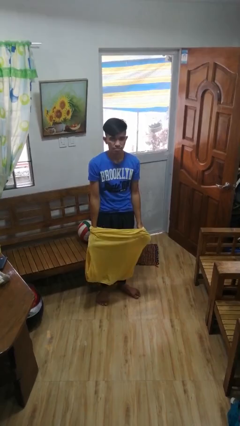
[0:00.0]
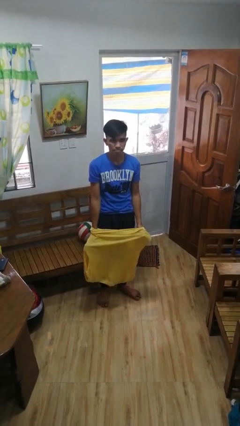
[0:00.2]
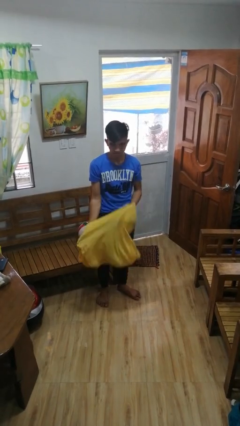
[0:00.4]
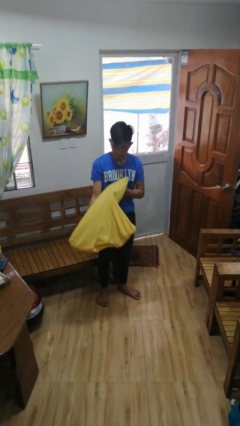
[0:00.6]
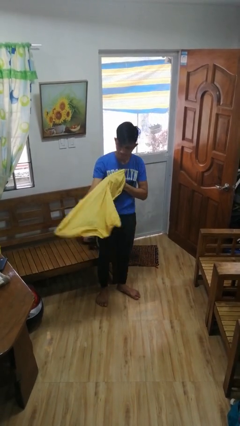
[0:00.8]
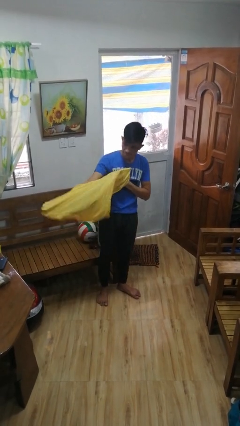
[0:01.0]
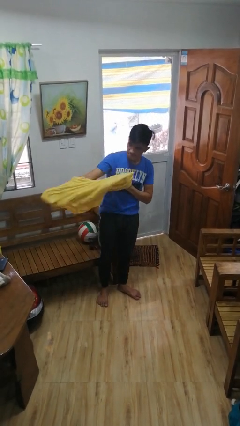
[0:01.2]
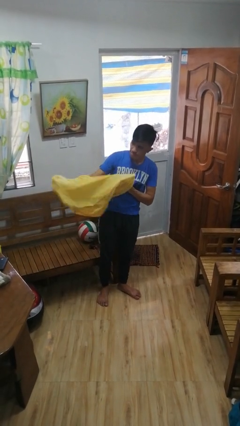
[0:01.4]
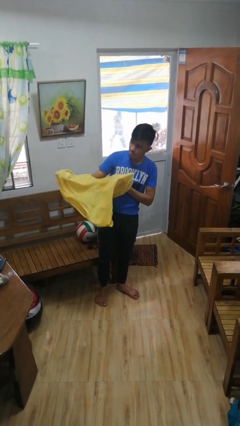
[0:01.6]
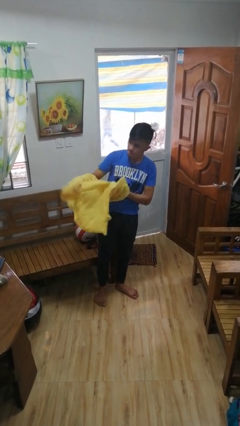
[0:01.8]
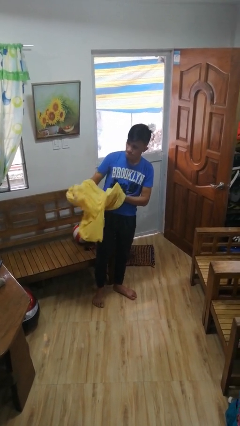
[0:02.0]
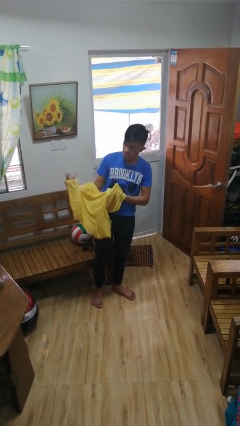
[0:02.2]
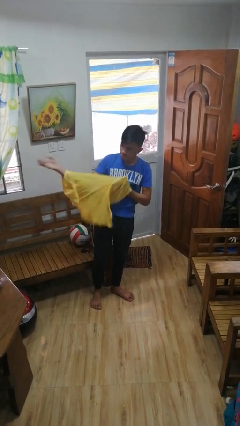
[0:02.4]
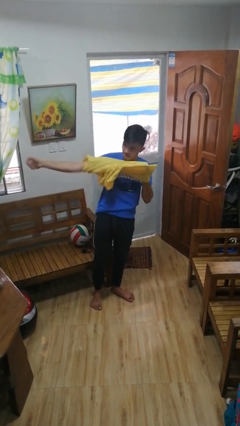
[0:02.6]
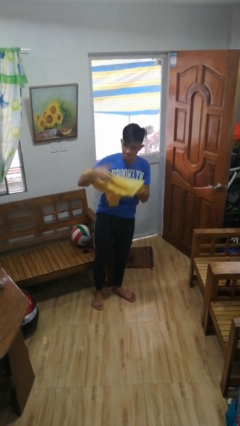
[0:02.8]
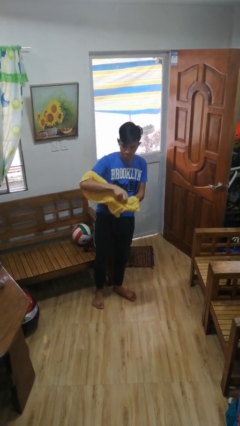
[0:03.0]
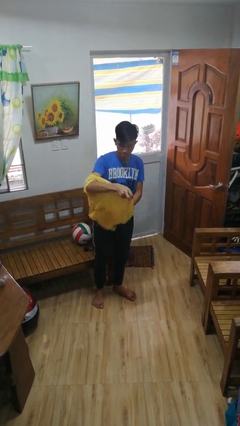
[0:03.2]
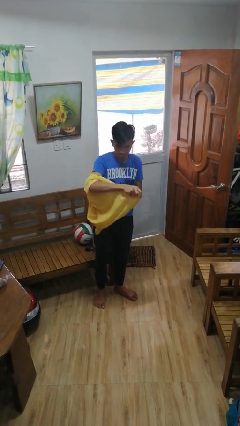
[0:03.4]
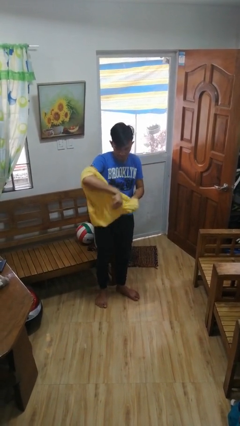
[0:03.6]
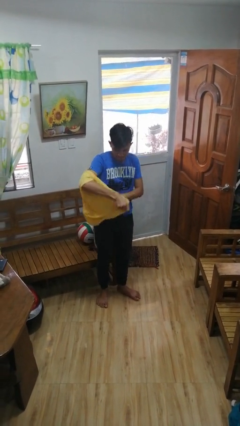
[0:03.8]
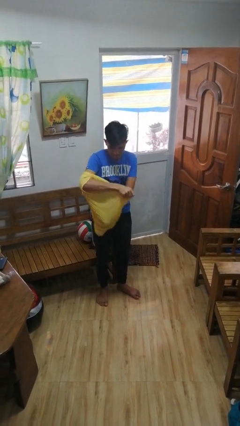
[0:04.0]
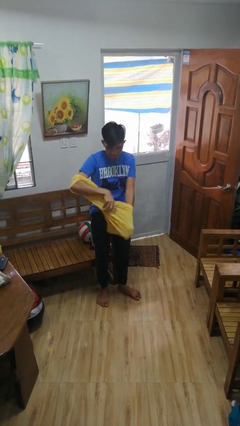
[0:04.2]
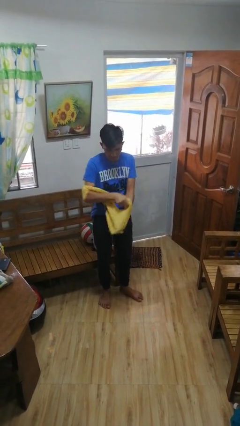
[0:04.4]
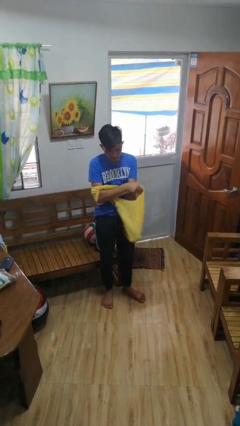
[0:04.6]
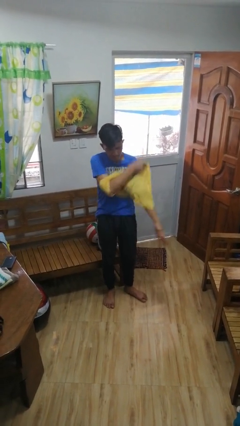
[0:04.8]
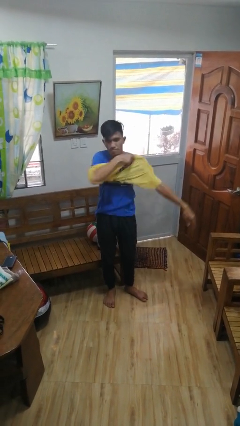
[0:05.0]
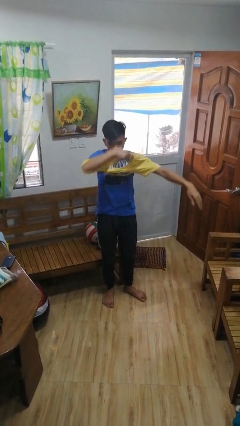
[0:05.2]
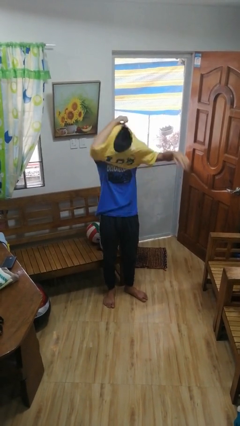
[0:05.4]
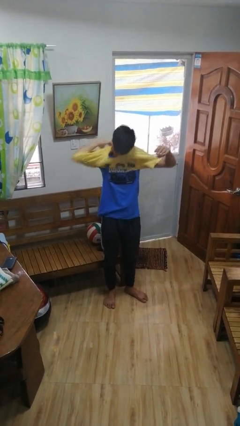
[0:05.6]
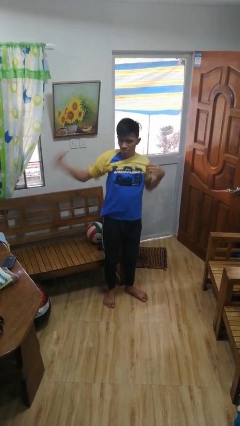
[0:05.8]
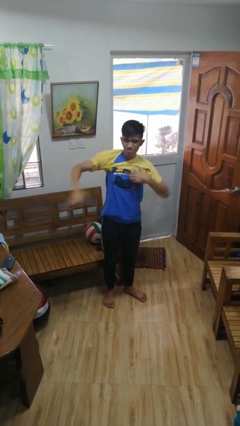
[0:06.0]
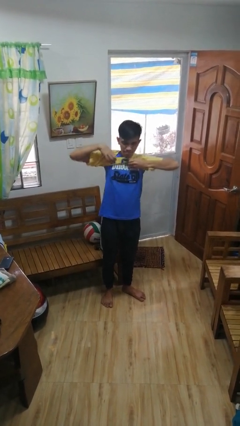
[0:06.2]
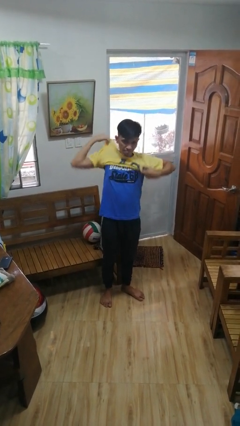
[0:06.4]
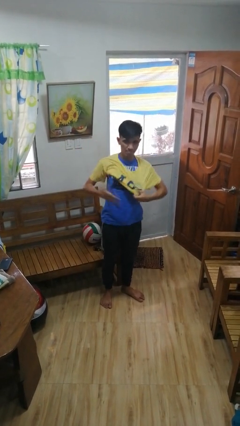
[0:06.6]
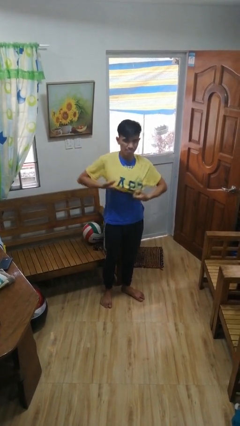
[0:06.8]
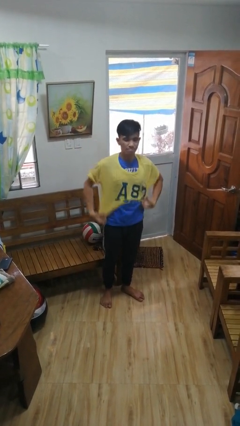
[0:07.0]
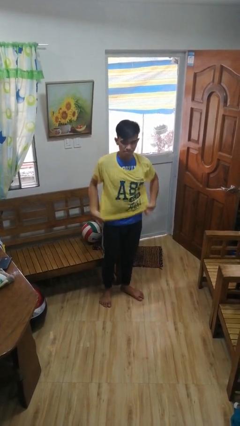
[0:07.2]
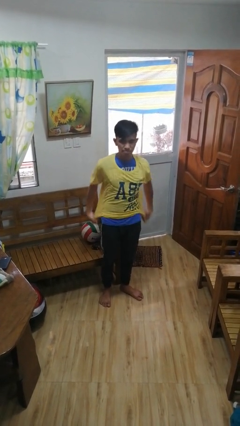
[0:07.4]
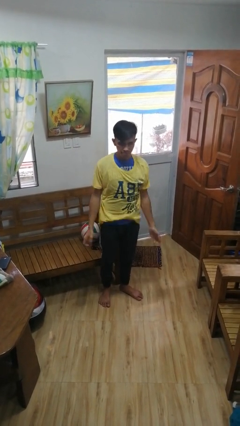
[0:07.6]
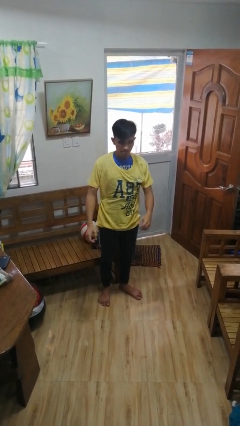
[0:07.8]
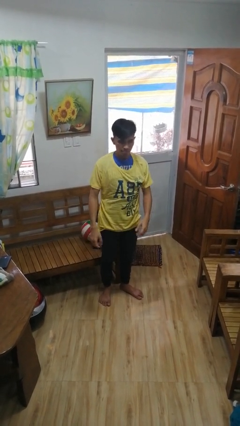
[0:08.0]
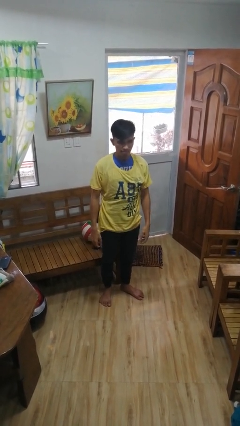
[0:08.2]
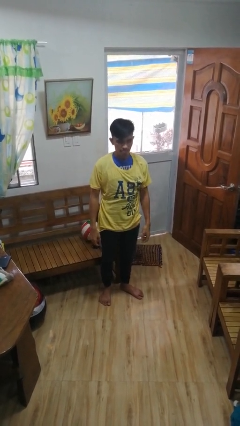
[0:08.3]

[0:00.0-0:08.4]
person puts on shirt

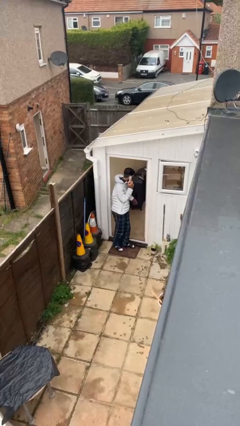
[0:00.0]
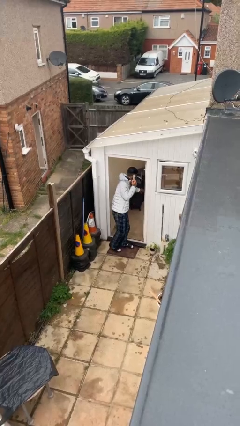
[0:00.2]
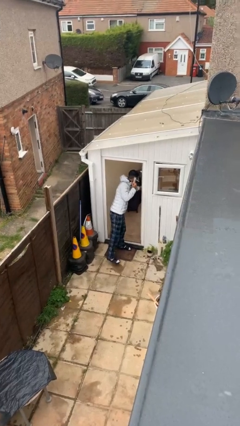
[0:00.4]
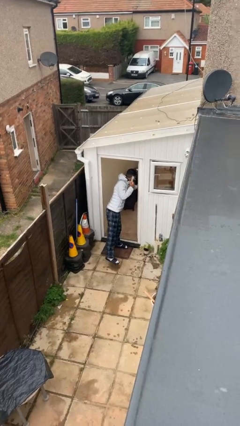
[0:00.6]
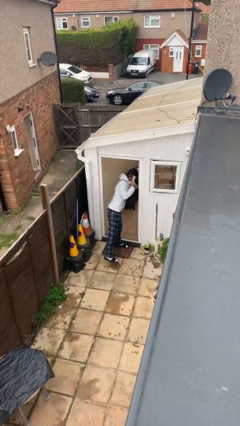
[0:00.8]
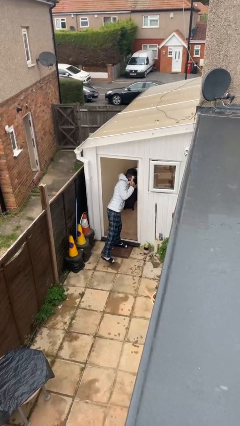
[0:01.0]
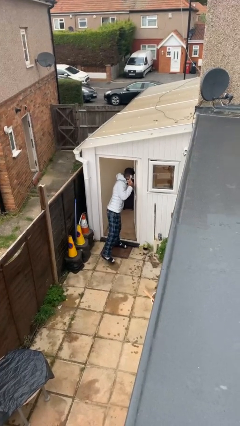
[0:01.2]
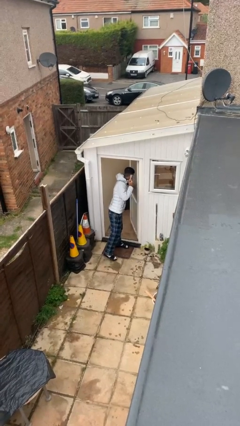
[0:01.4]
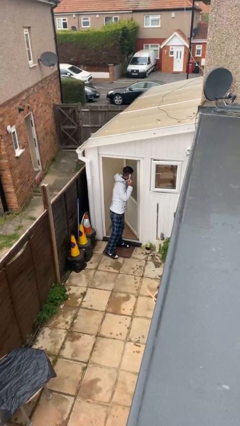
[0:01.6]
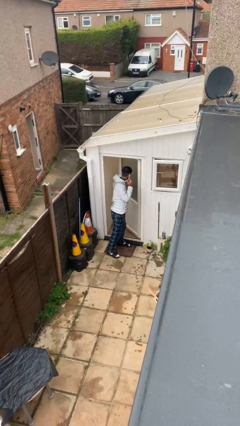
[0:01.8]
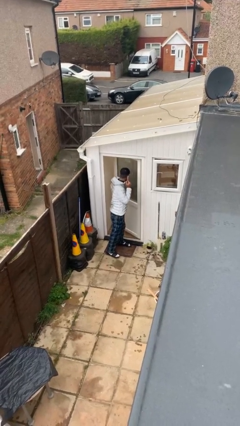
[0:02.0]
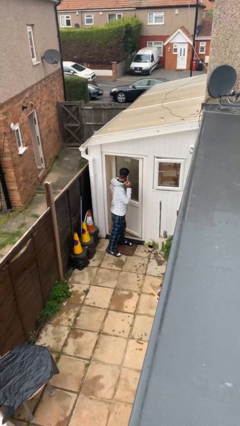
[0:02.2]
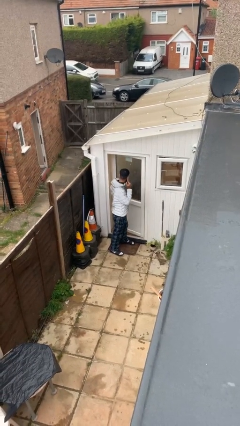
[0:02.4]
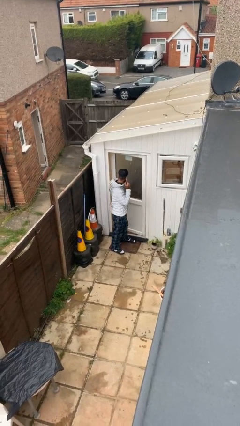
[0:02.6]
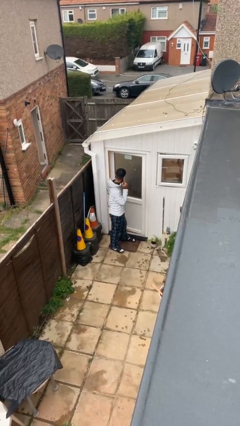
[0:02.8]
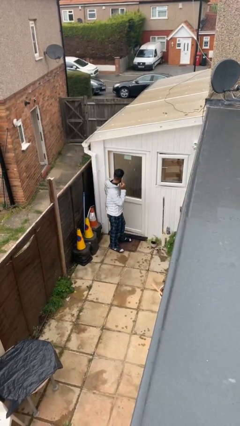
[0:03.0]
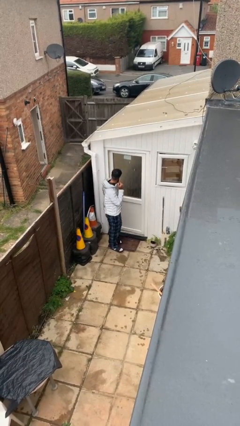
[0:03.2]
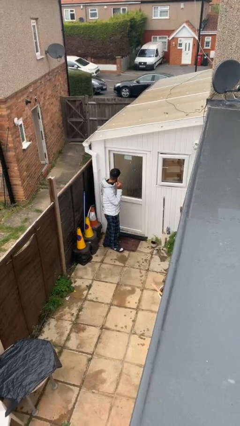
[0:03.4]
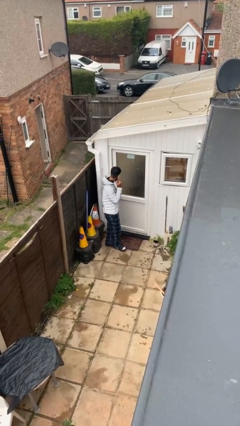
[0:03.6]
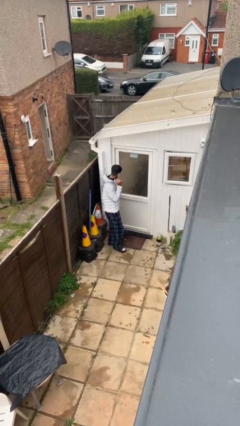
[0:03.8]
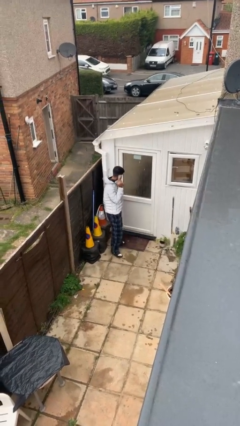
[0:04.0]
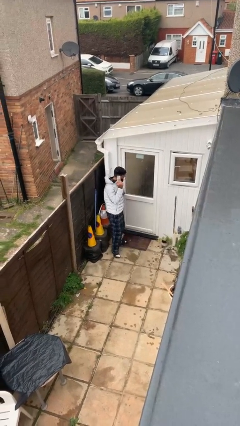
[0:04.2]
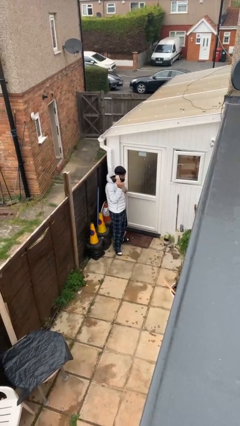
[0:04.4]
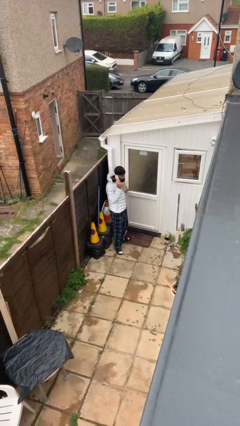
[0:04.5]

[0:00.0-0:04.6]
person closes facility door

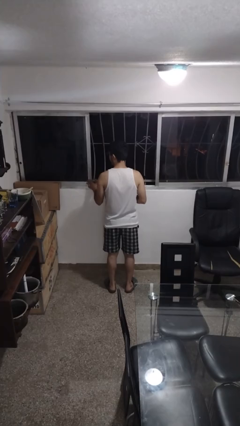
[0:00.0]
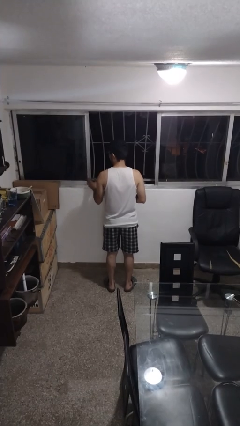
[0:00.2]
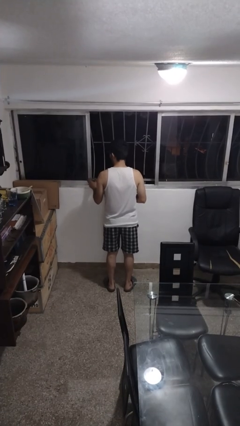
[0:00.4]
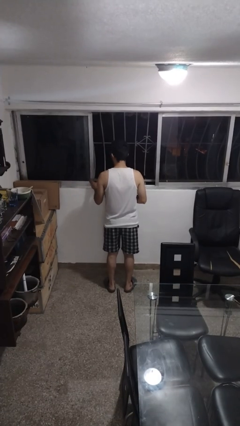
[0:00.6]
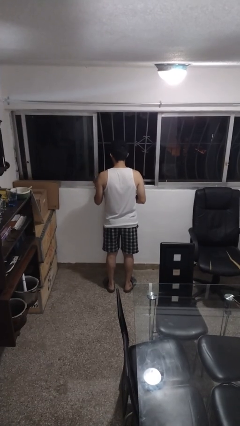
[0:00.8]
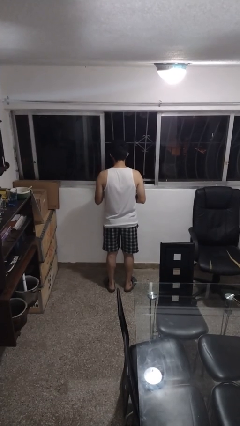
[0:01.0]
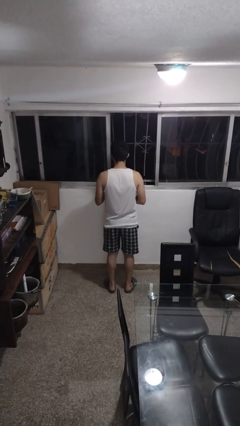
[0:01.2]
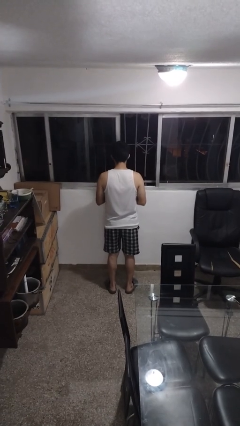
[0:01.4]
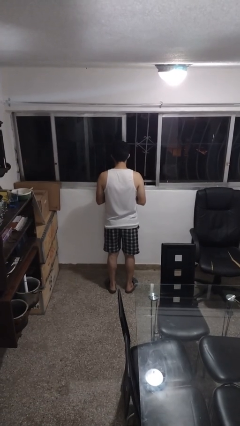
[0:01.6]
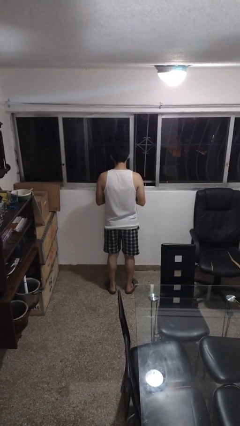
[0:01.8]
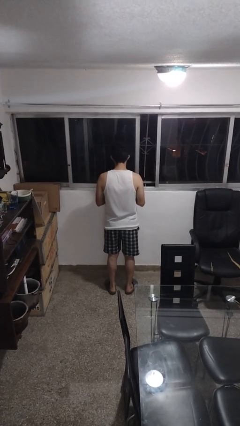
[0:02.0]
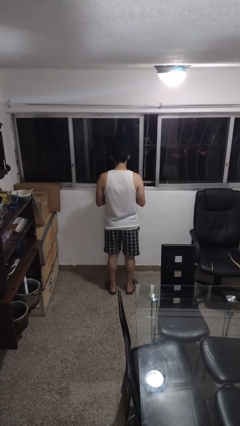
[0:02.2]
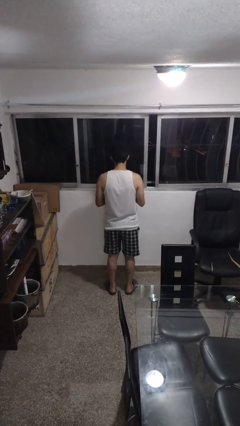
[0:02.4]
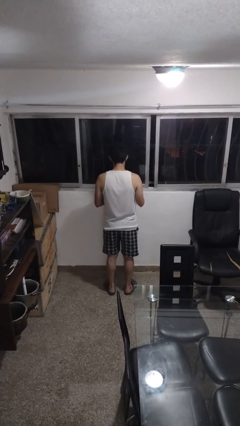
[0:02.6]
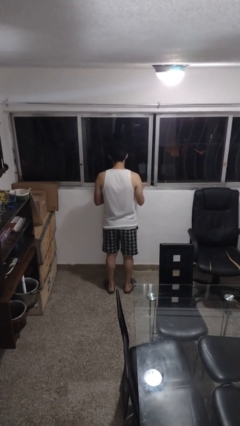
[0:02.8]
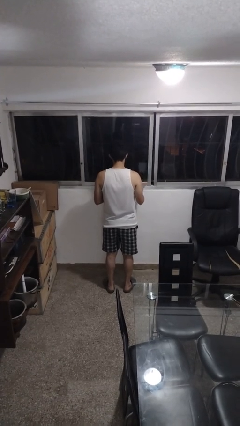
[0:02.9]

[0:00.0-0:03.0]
person closes home window

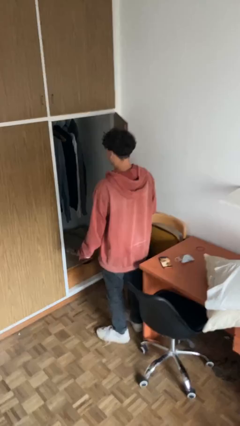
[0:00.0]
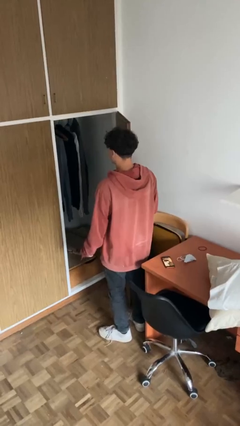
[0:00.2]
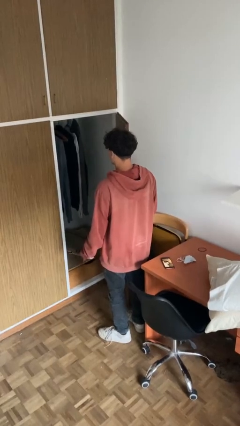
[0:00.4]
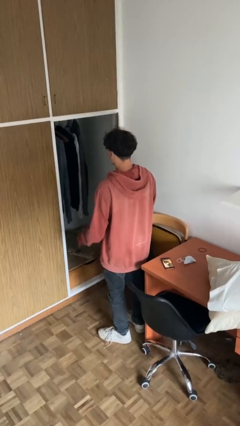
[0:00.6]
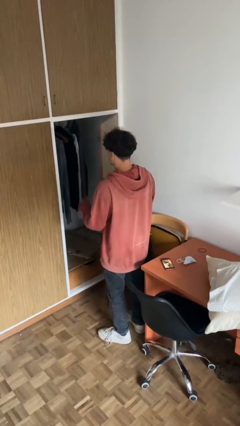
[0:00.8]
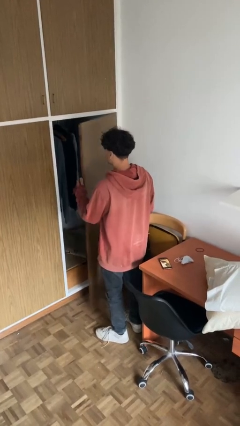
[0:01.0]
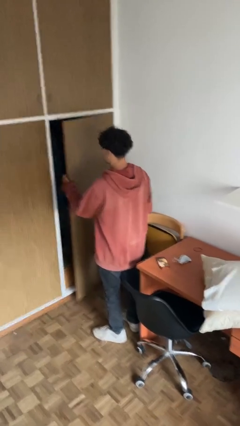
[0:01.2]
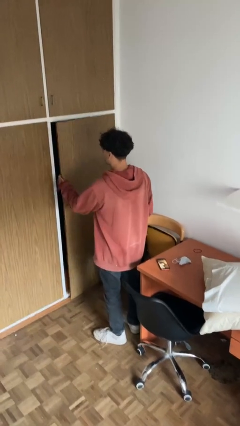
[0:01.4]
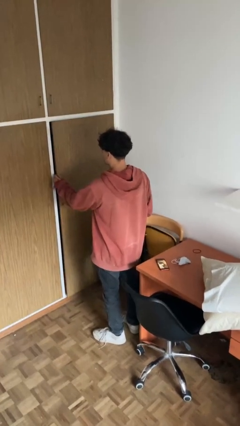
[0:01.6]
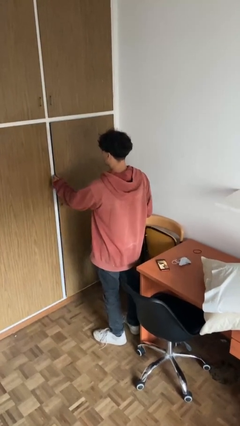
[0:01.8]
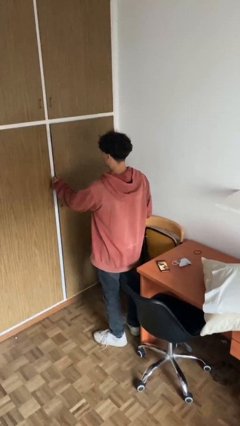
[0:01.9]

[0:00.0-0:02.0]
person closes closet door
